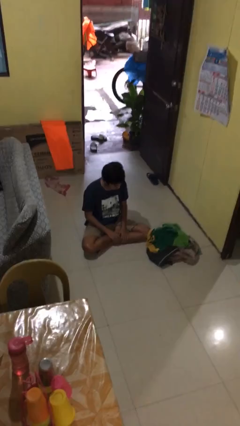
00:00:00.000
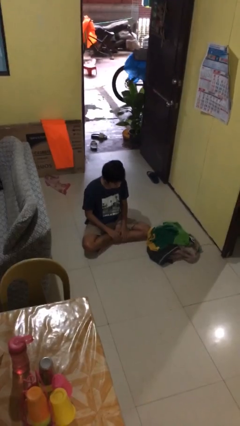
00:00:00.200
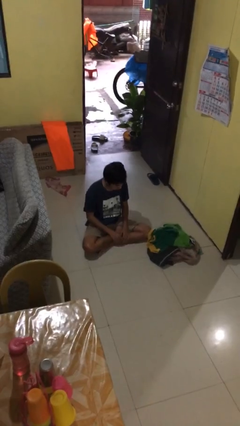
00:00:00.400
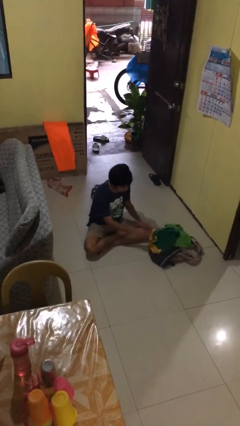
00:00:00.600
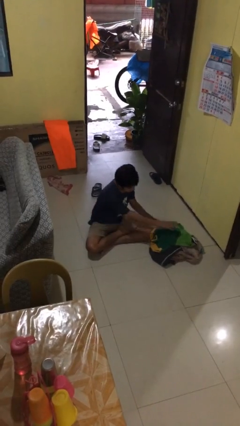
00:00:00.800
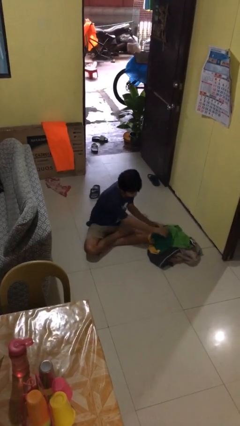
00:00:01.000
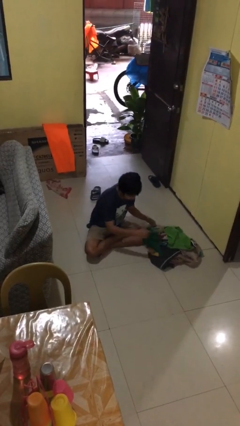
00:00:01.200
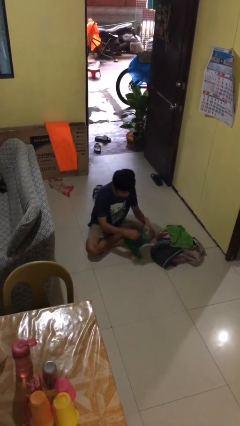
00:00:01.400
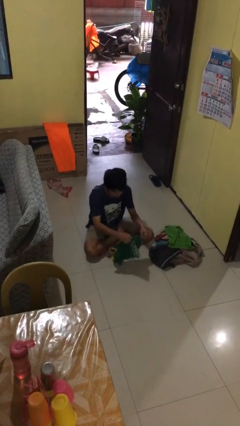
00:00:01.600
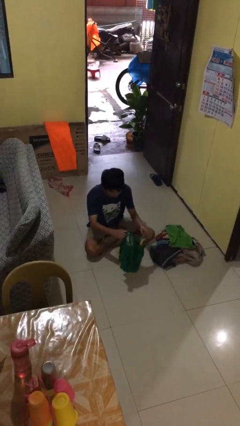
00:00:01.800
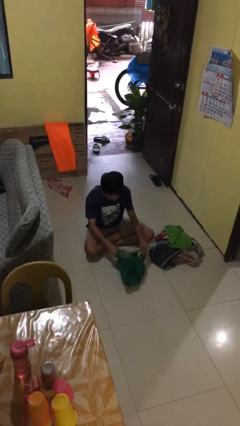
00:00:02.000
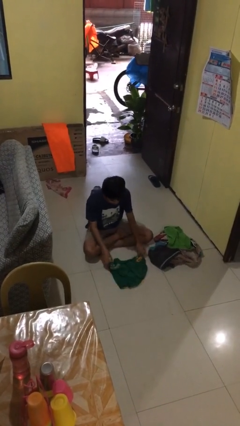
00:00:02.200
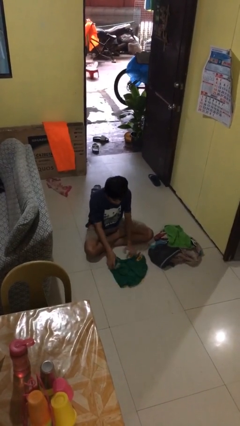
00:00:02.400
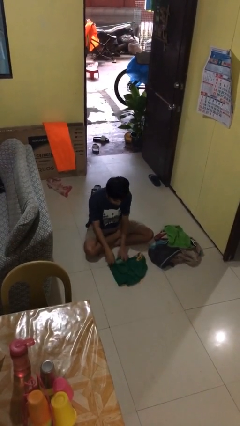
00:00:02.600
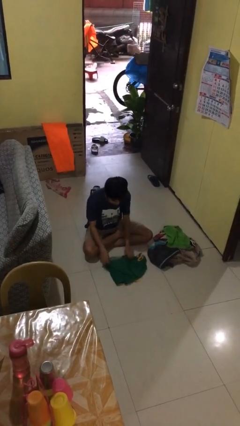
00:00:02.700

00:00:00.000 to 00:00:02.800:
person folds shirt

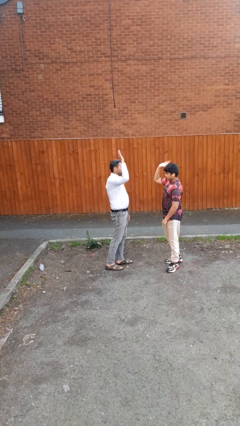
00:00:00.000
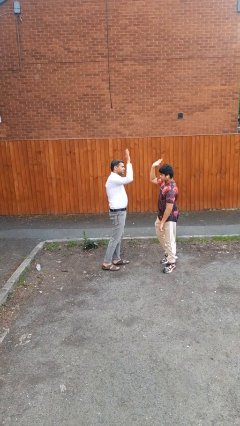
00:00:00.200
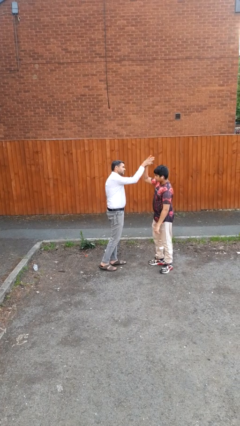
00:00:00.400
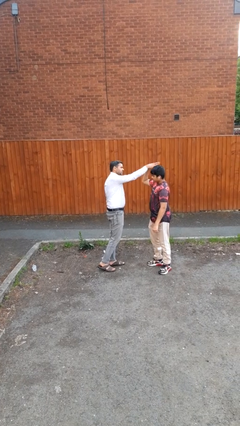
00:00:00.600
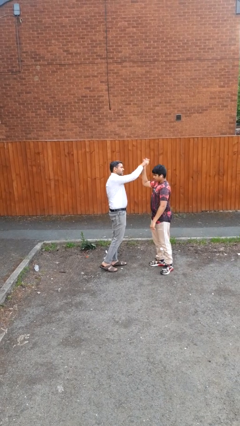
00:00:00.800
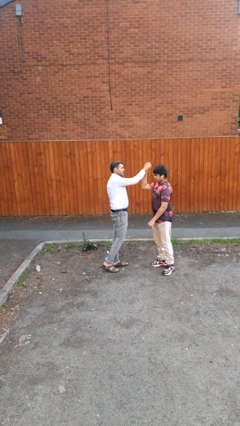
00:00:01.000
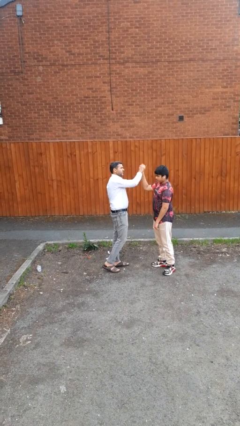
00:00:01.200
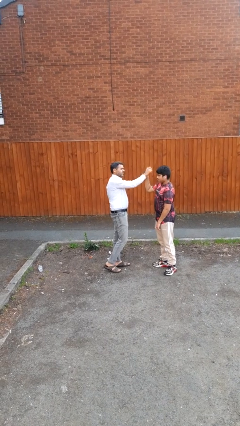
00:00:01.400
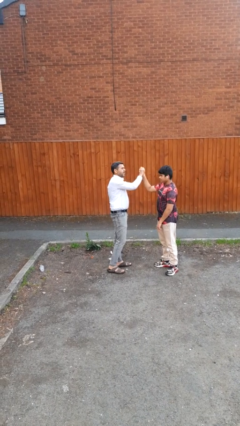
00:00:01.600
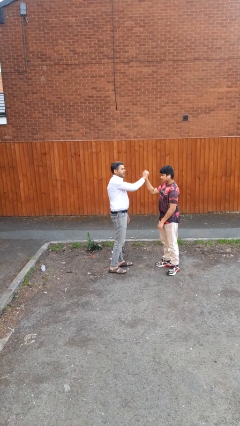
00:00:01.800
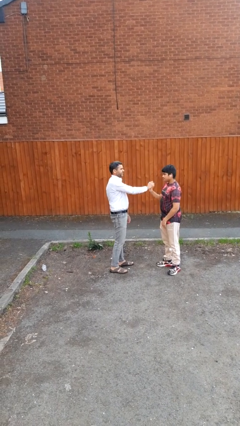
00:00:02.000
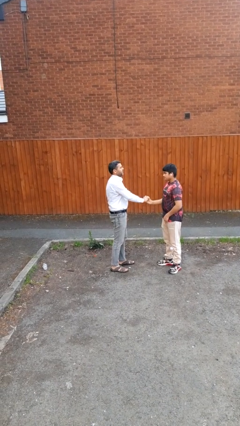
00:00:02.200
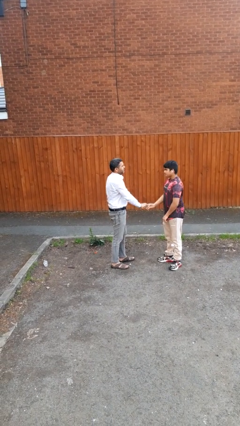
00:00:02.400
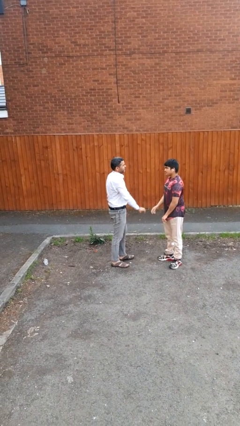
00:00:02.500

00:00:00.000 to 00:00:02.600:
person highfives hand

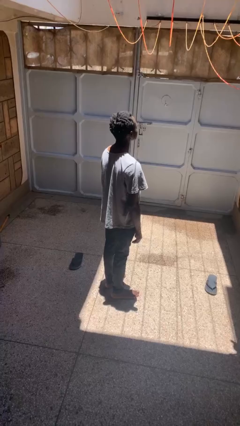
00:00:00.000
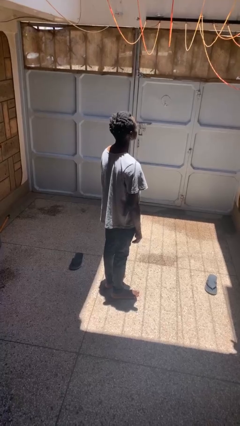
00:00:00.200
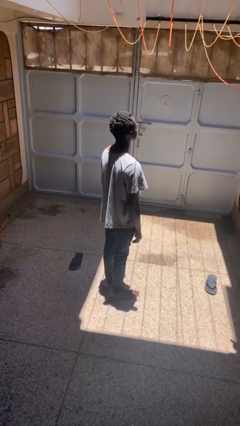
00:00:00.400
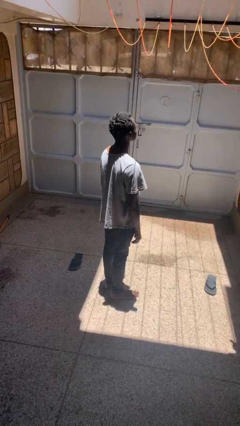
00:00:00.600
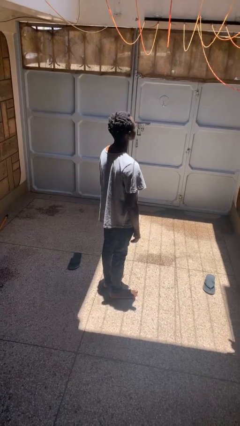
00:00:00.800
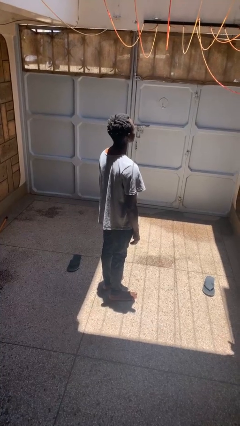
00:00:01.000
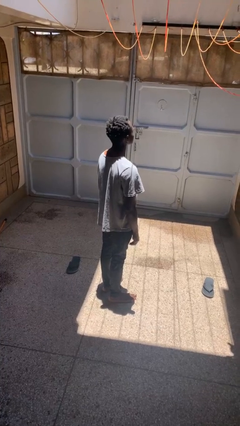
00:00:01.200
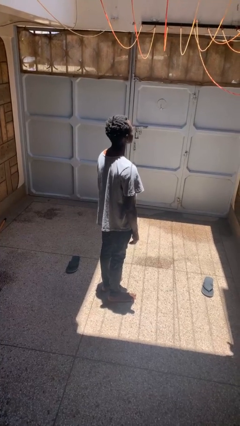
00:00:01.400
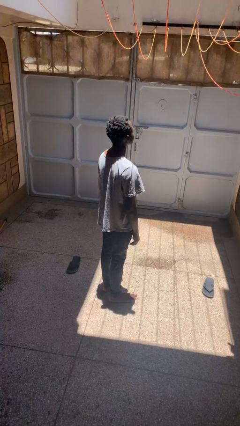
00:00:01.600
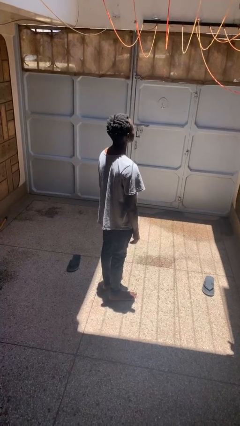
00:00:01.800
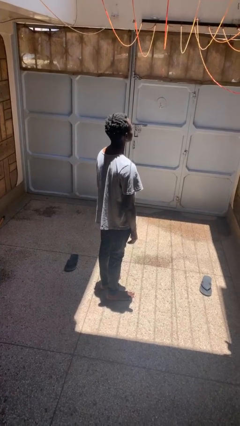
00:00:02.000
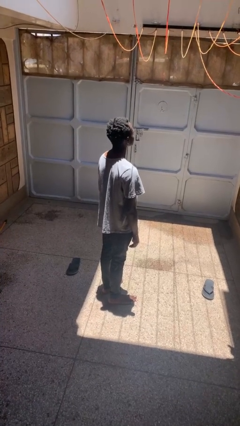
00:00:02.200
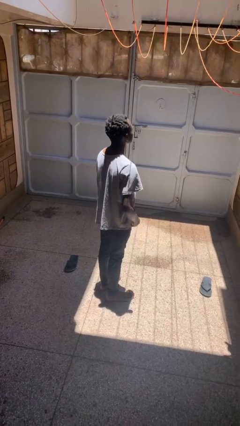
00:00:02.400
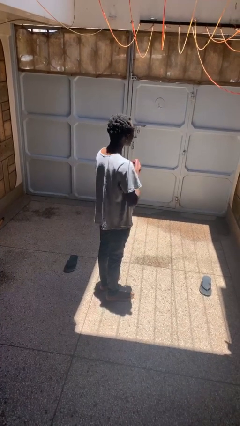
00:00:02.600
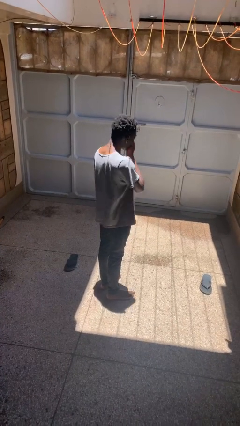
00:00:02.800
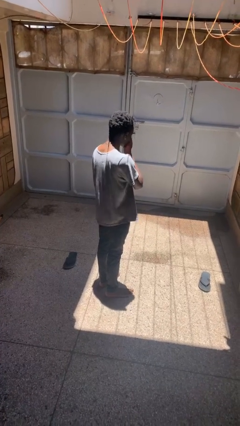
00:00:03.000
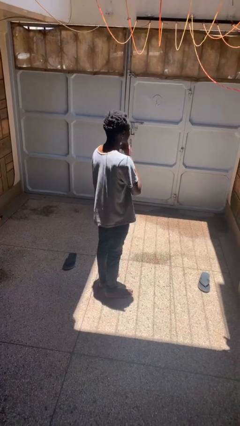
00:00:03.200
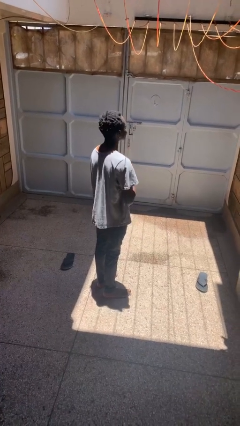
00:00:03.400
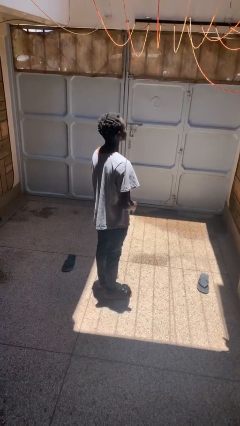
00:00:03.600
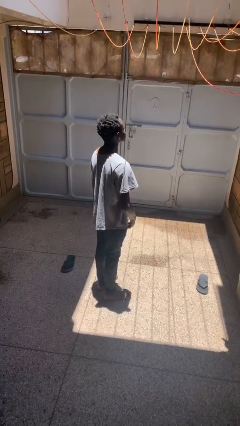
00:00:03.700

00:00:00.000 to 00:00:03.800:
person sneezes into hand

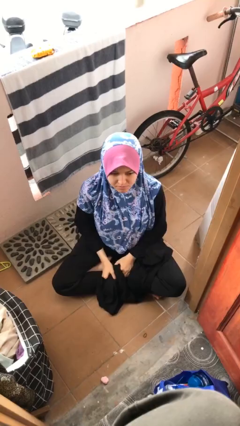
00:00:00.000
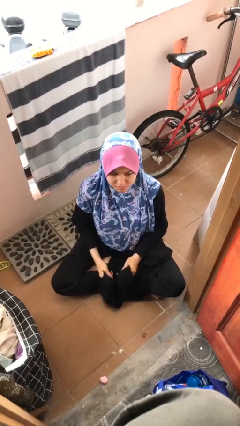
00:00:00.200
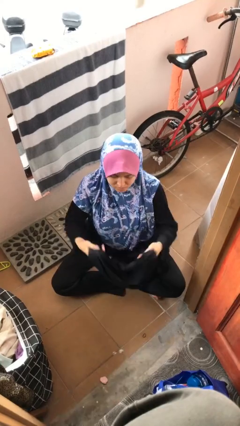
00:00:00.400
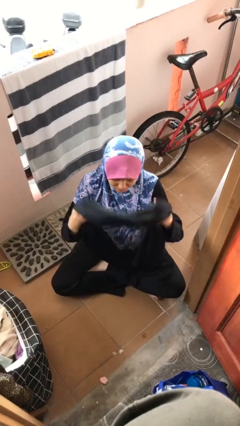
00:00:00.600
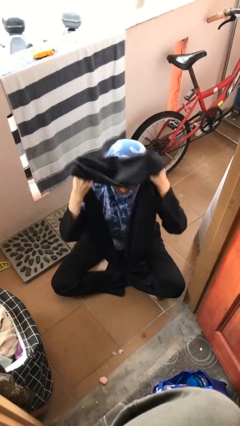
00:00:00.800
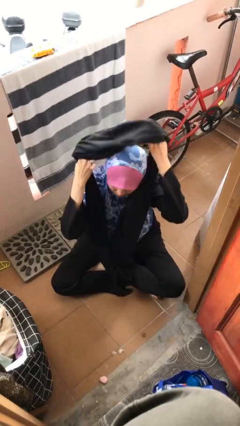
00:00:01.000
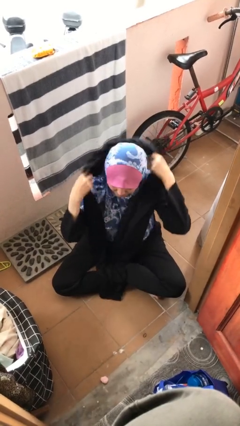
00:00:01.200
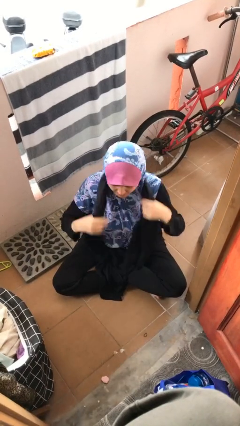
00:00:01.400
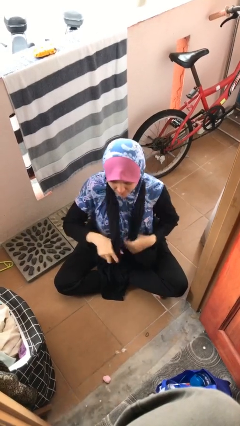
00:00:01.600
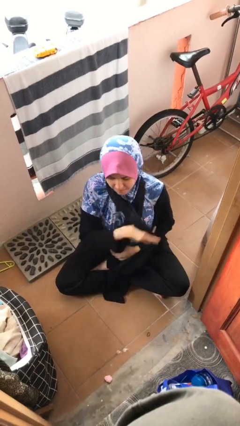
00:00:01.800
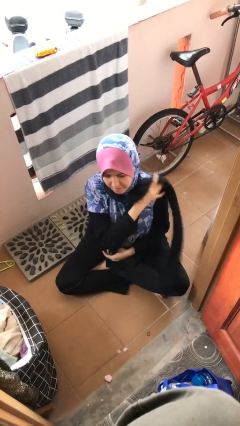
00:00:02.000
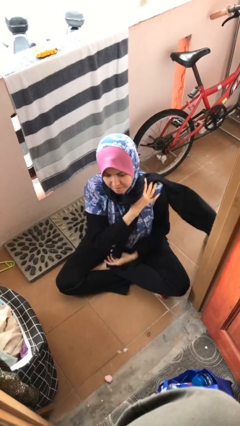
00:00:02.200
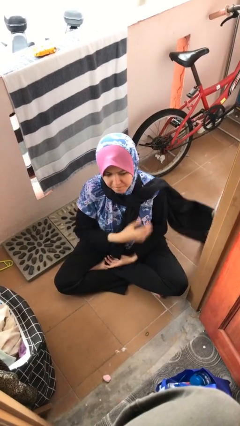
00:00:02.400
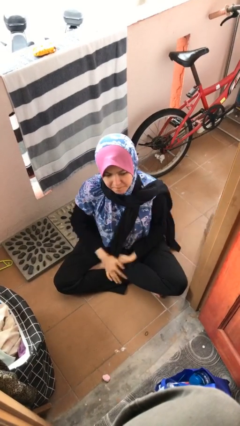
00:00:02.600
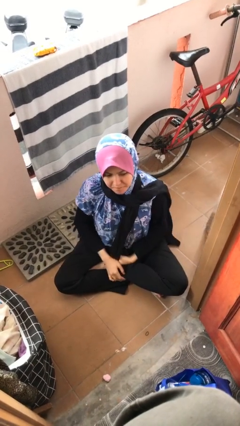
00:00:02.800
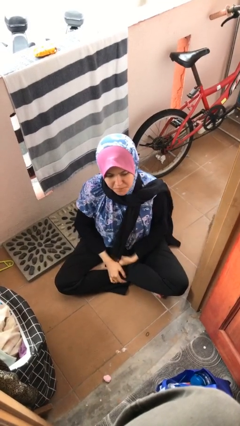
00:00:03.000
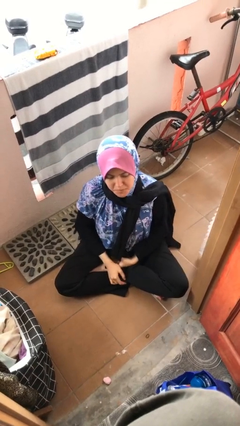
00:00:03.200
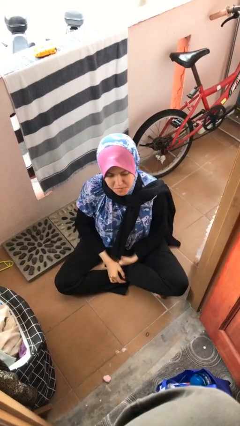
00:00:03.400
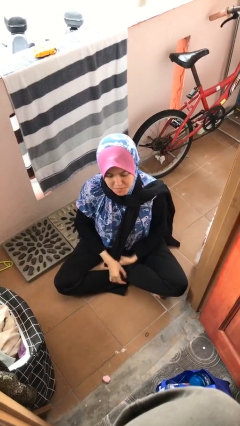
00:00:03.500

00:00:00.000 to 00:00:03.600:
person puts on scarf

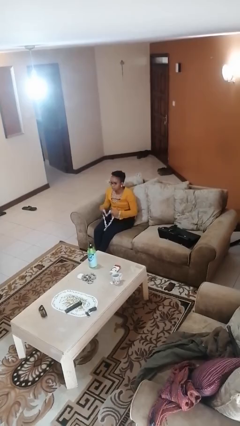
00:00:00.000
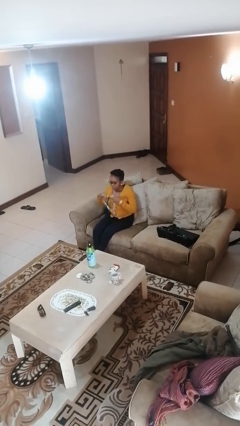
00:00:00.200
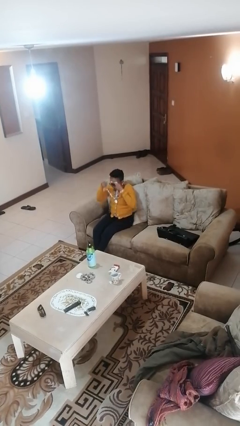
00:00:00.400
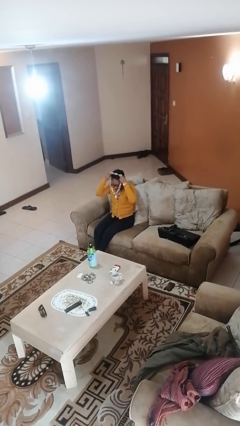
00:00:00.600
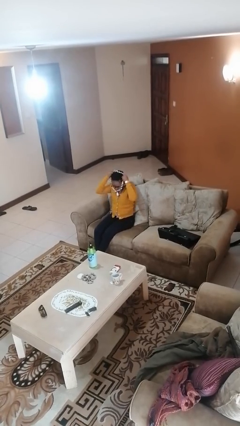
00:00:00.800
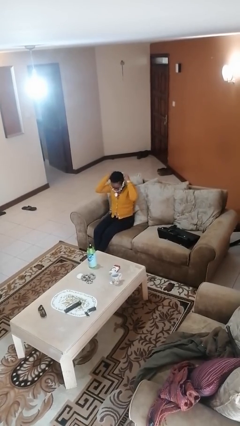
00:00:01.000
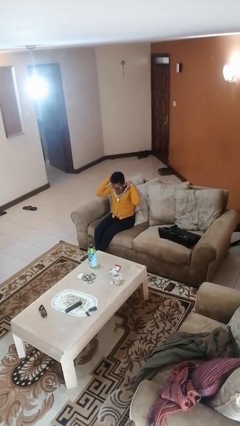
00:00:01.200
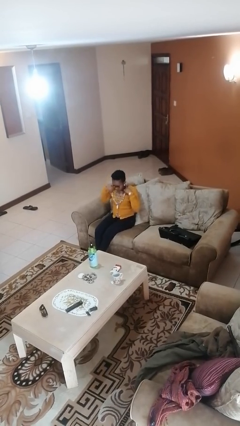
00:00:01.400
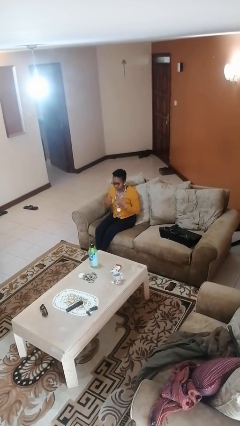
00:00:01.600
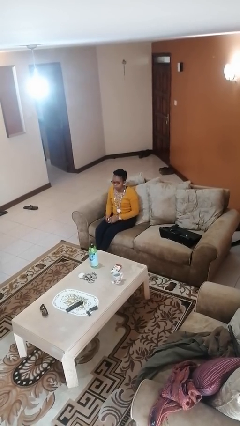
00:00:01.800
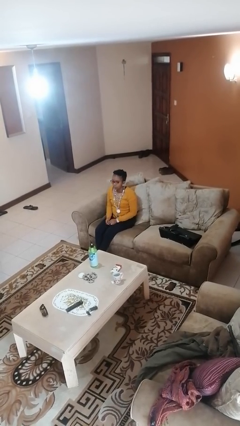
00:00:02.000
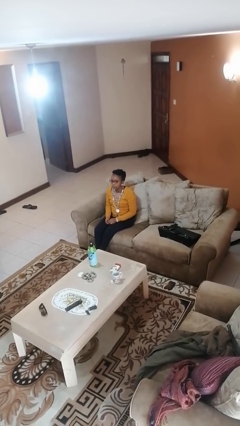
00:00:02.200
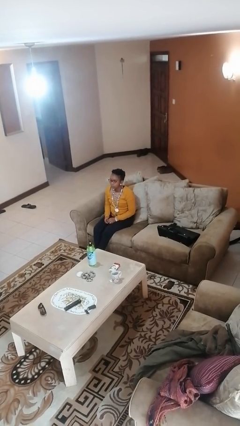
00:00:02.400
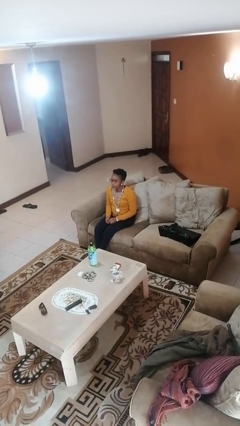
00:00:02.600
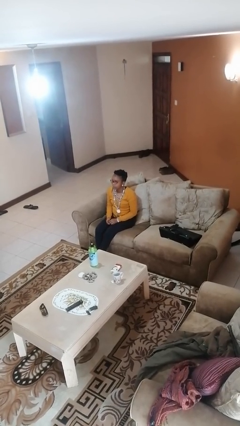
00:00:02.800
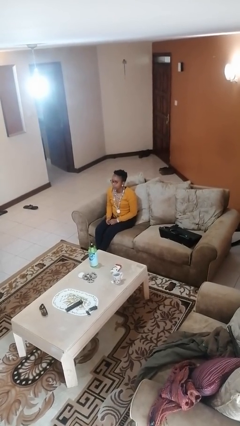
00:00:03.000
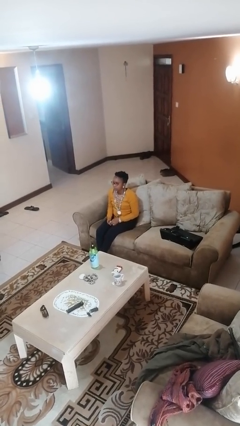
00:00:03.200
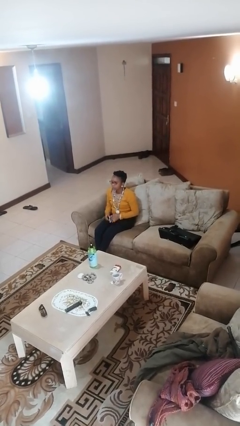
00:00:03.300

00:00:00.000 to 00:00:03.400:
person puts on necklace

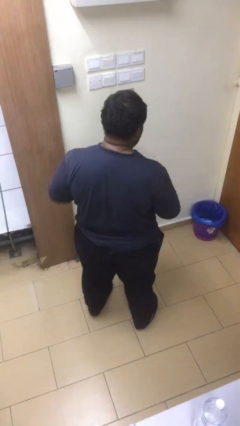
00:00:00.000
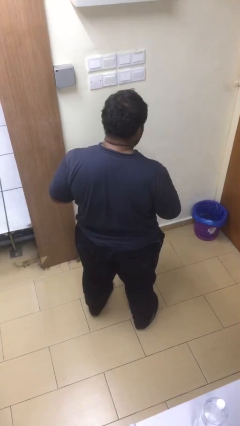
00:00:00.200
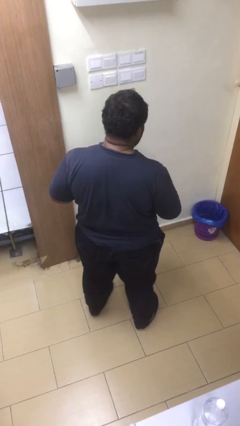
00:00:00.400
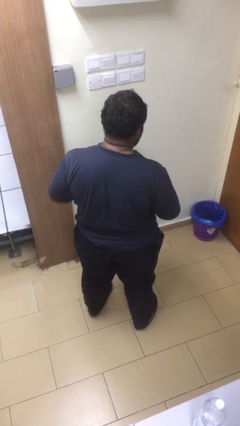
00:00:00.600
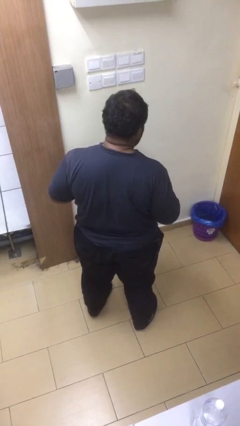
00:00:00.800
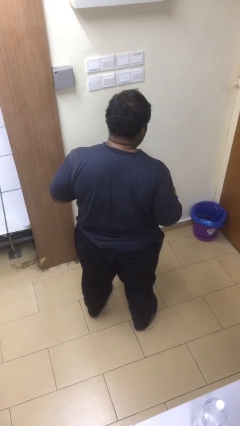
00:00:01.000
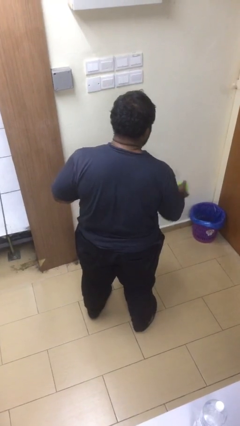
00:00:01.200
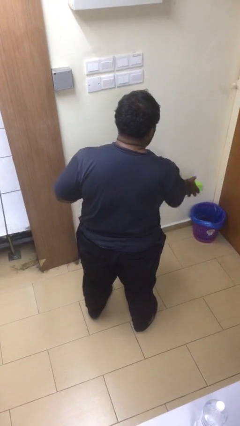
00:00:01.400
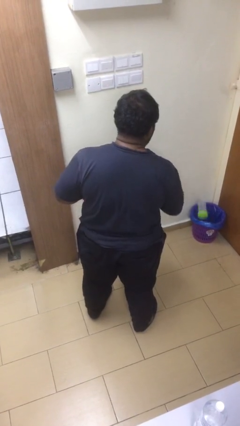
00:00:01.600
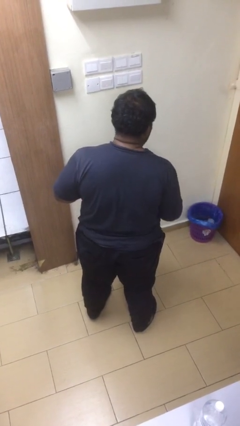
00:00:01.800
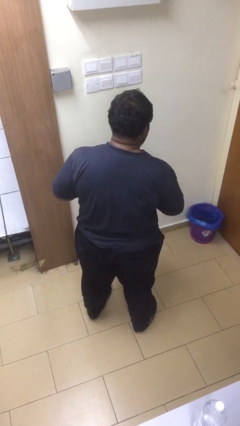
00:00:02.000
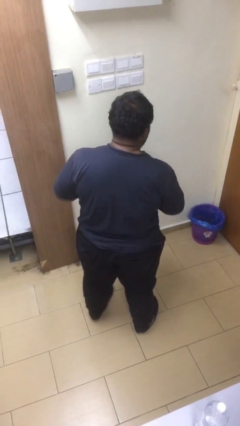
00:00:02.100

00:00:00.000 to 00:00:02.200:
person discards trash
